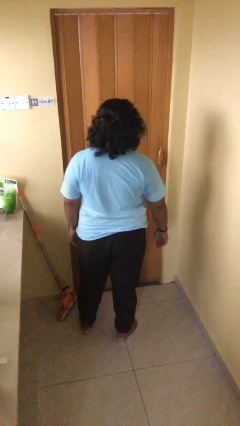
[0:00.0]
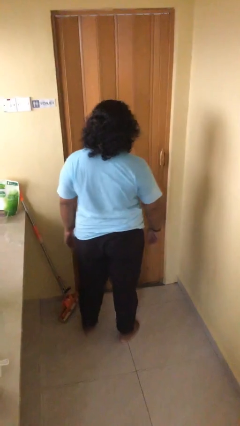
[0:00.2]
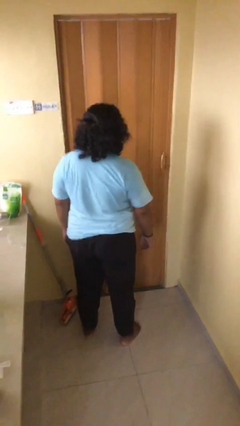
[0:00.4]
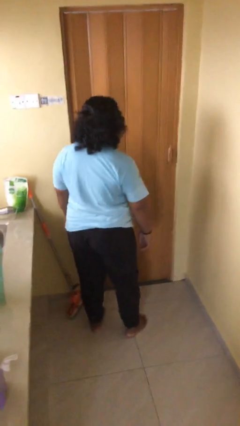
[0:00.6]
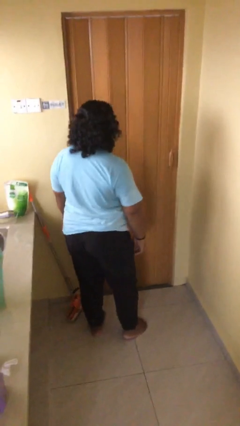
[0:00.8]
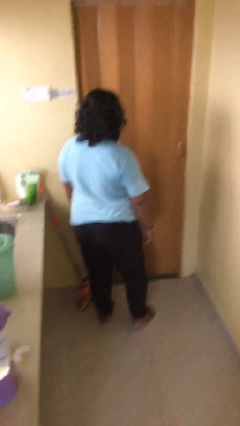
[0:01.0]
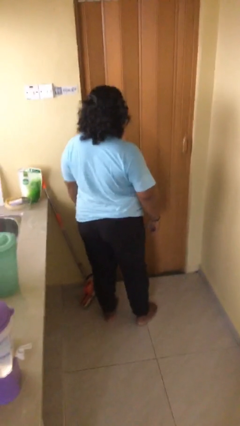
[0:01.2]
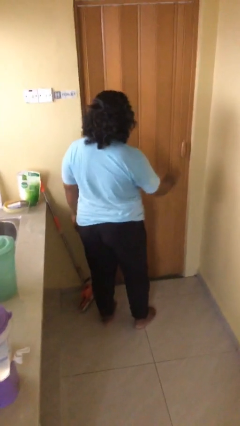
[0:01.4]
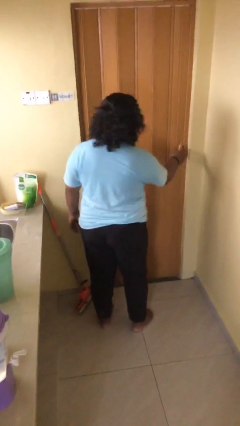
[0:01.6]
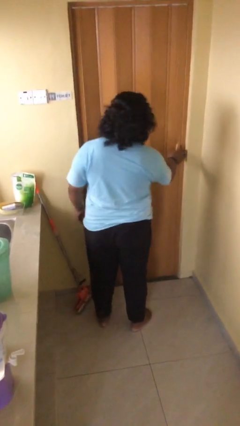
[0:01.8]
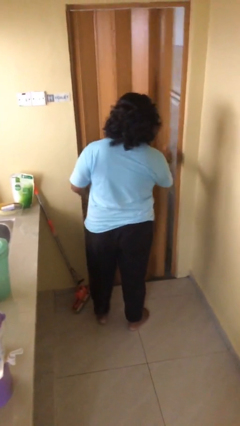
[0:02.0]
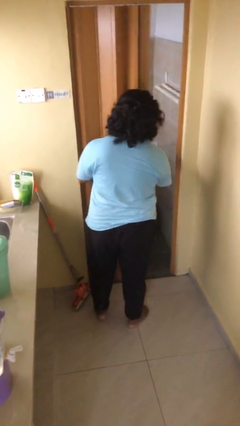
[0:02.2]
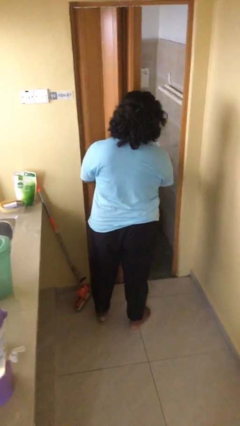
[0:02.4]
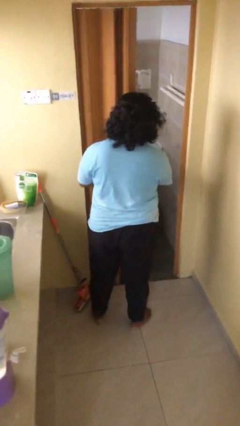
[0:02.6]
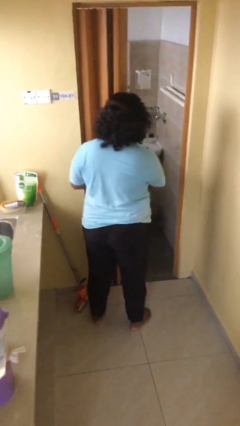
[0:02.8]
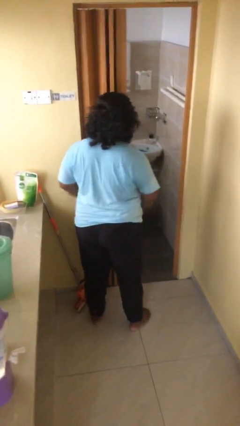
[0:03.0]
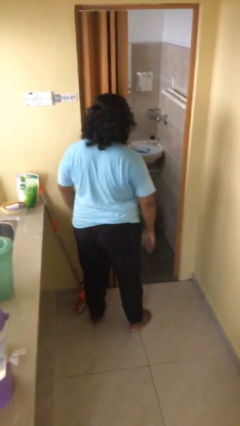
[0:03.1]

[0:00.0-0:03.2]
person opens sliding door

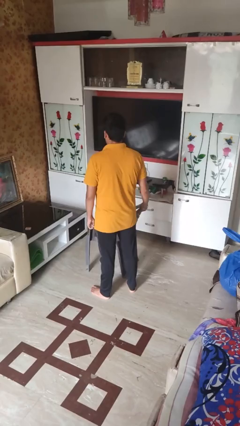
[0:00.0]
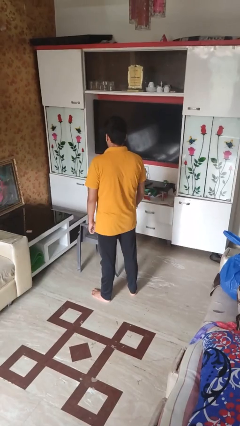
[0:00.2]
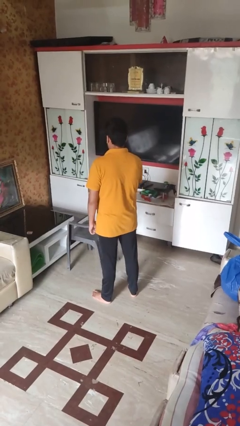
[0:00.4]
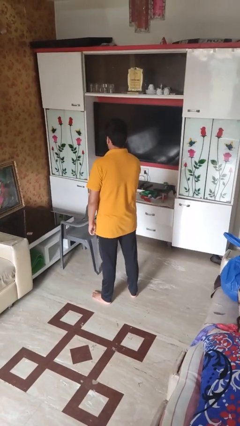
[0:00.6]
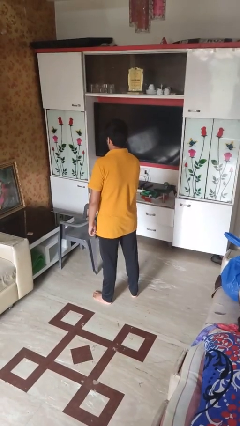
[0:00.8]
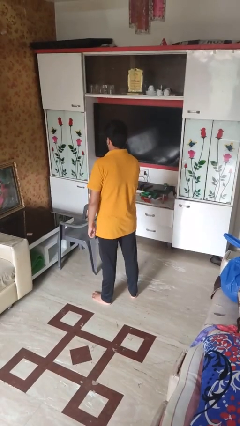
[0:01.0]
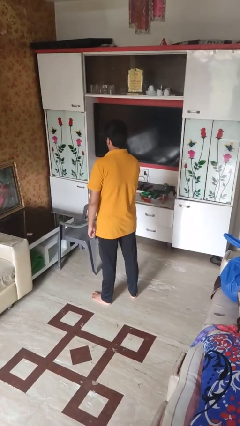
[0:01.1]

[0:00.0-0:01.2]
person pushes in chair

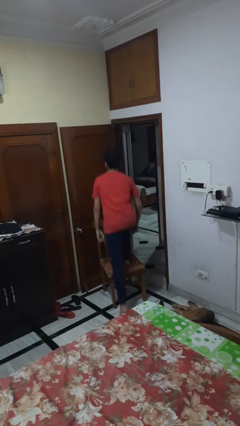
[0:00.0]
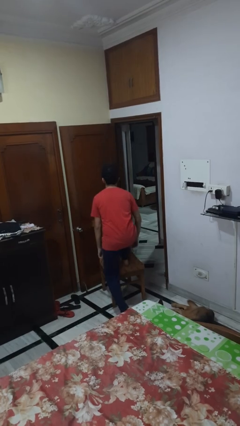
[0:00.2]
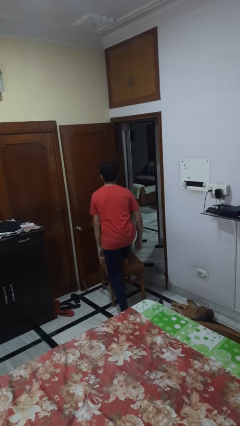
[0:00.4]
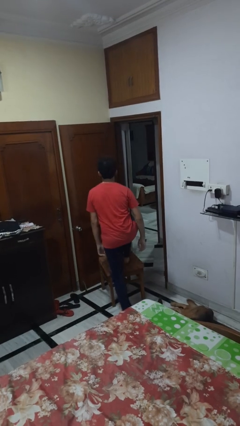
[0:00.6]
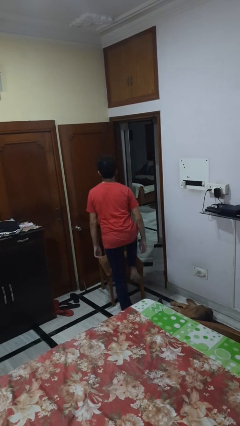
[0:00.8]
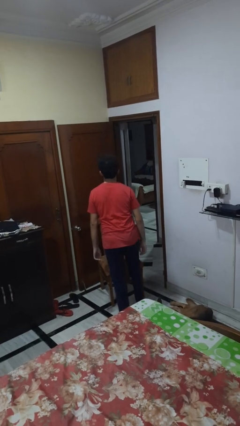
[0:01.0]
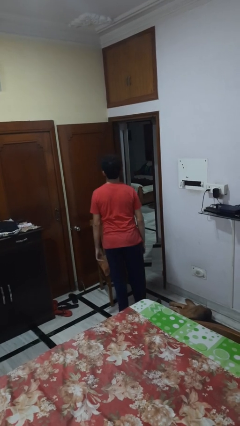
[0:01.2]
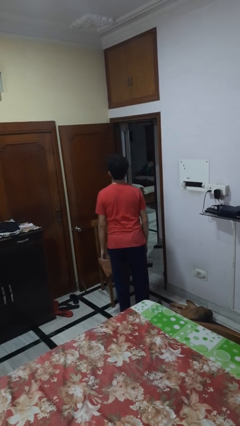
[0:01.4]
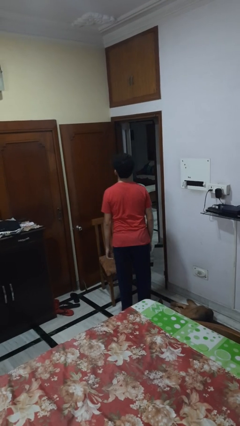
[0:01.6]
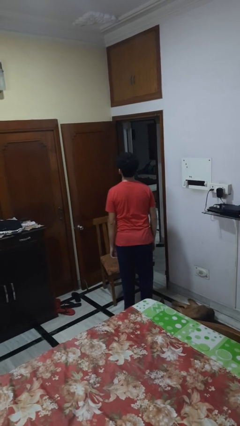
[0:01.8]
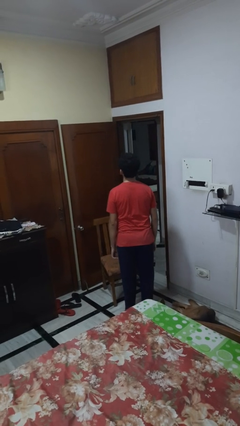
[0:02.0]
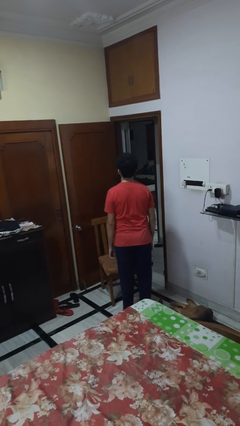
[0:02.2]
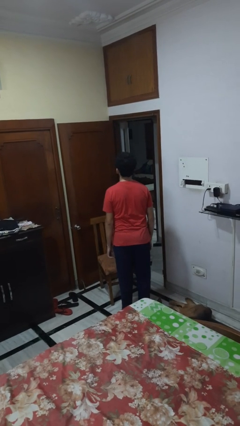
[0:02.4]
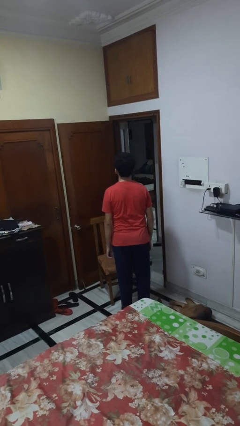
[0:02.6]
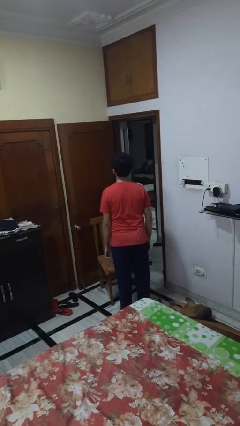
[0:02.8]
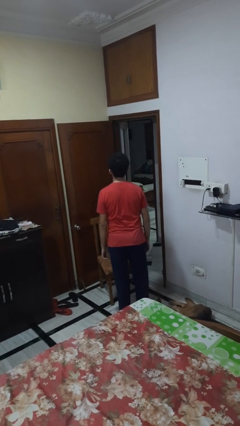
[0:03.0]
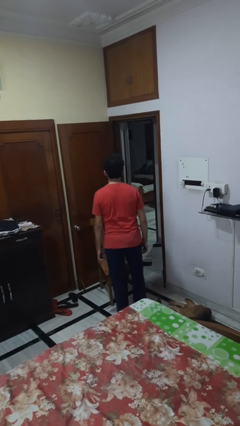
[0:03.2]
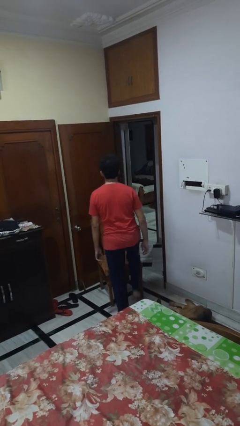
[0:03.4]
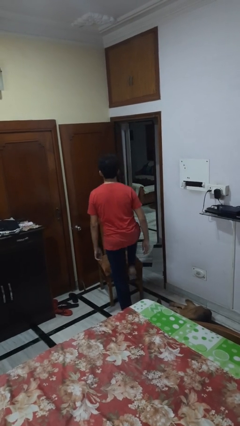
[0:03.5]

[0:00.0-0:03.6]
person climbs off chair

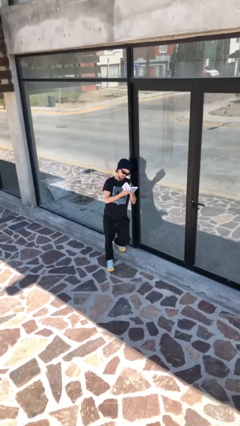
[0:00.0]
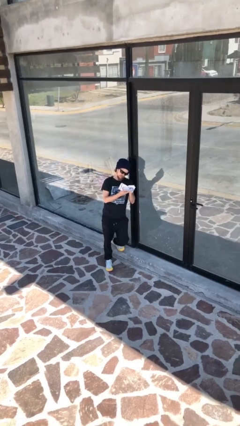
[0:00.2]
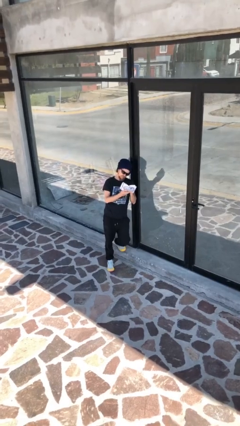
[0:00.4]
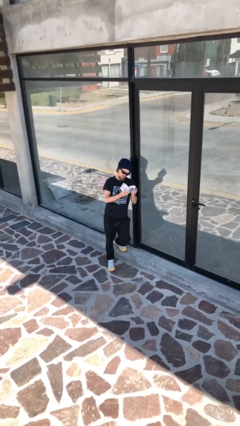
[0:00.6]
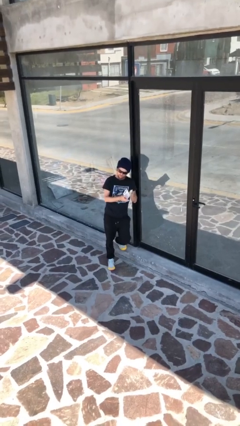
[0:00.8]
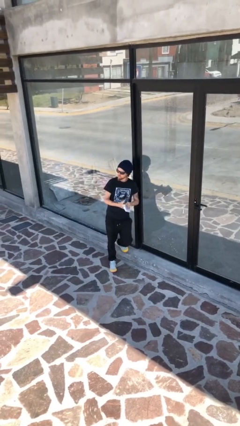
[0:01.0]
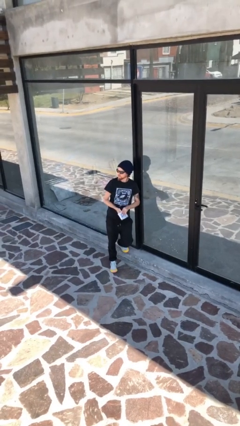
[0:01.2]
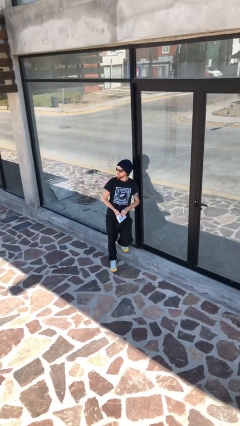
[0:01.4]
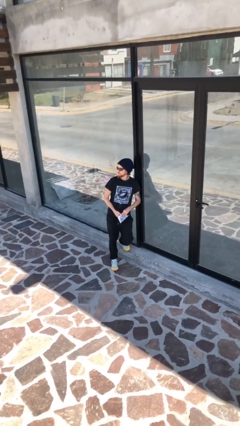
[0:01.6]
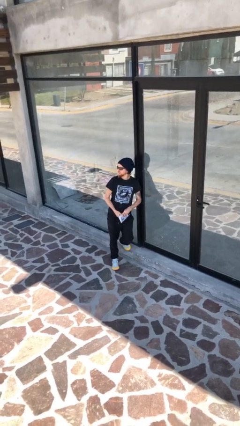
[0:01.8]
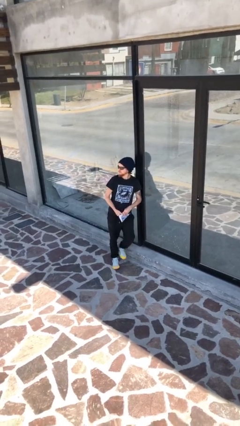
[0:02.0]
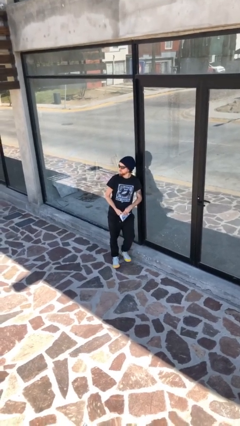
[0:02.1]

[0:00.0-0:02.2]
person reads document

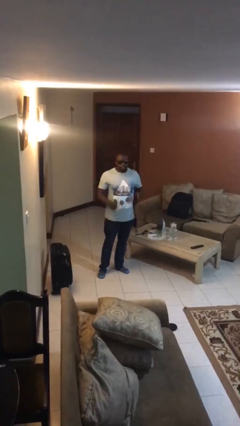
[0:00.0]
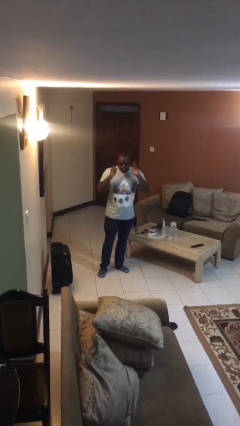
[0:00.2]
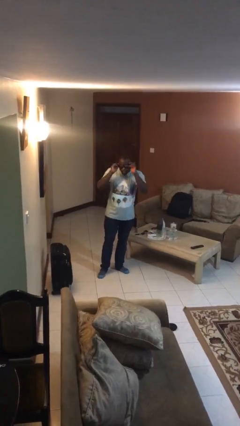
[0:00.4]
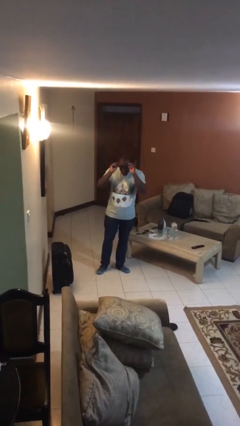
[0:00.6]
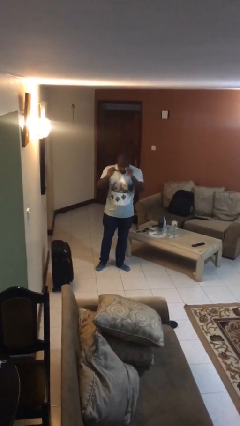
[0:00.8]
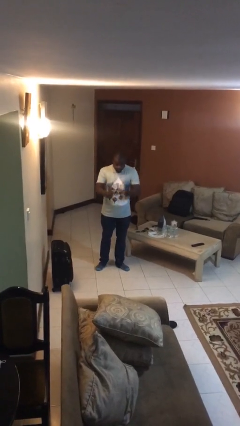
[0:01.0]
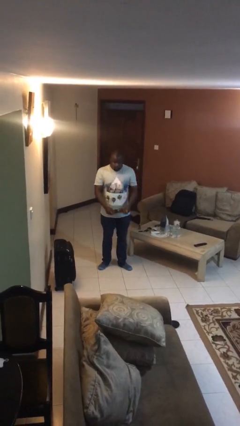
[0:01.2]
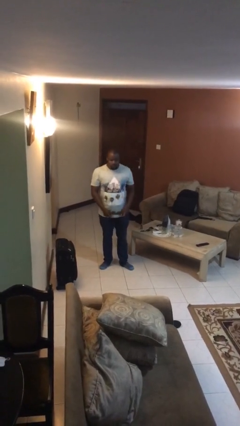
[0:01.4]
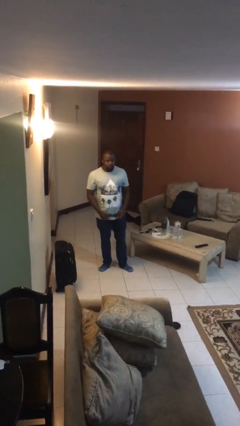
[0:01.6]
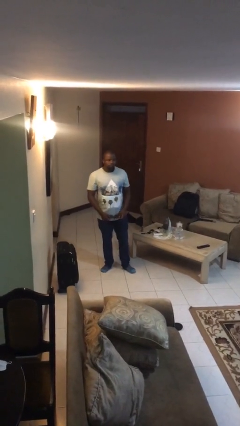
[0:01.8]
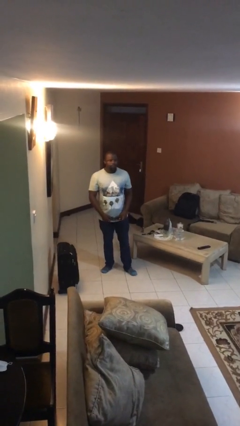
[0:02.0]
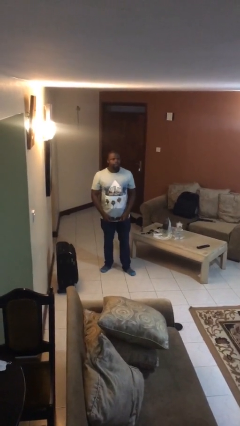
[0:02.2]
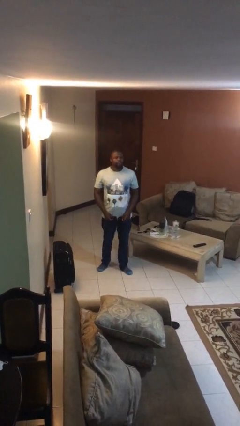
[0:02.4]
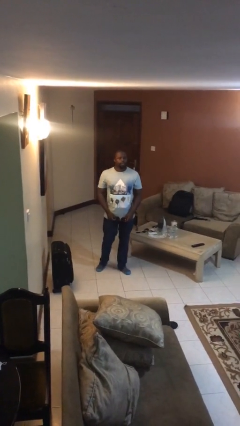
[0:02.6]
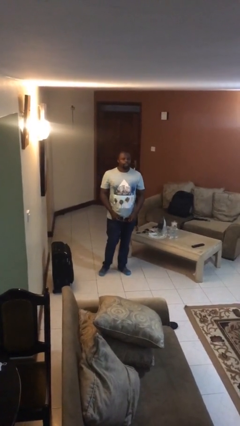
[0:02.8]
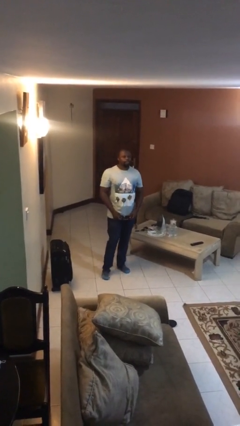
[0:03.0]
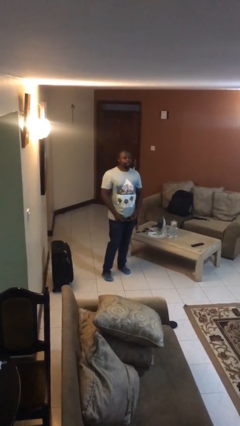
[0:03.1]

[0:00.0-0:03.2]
person takes off sunglasses

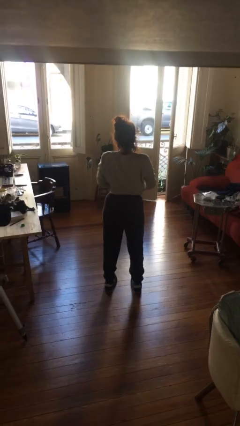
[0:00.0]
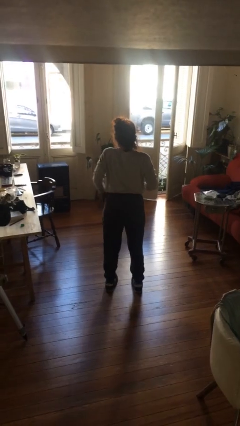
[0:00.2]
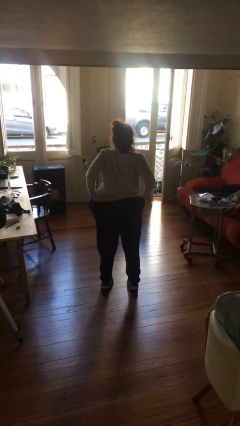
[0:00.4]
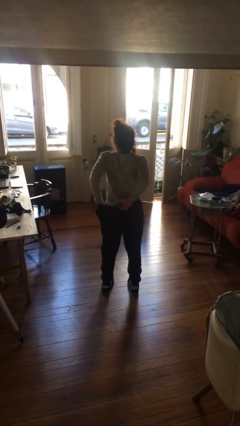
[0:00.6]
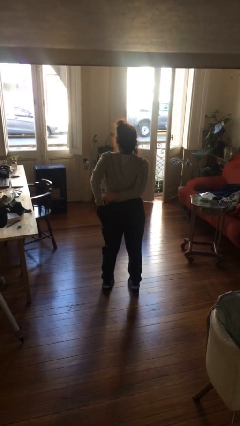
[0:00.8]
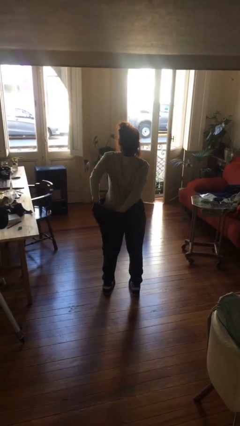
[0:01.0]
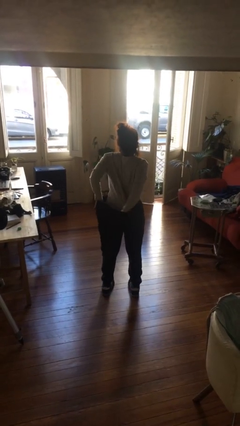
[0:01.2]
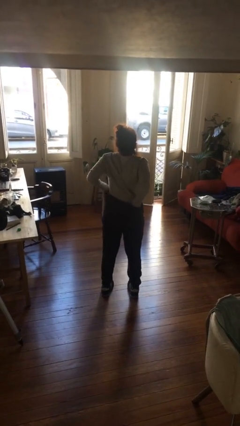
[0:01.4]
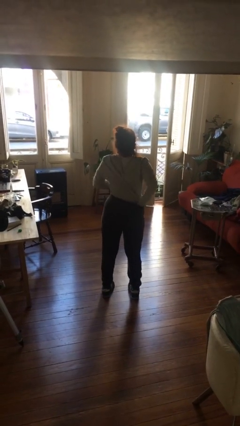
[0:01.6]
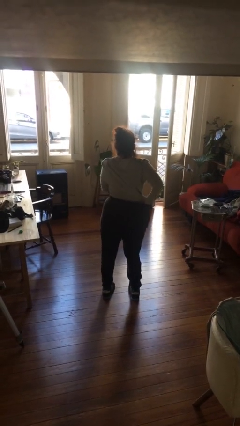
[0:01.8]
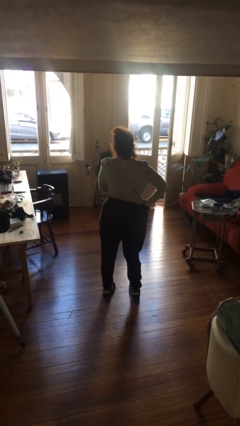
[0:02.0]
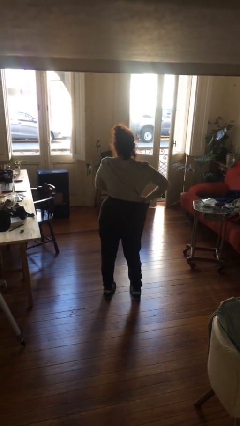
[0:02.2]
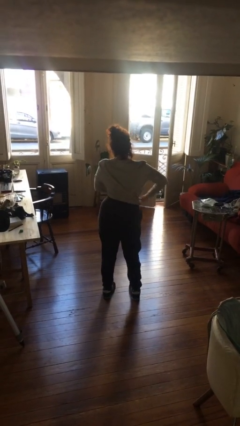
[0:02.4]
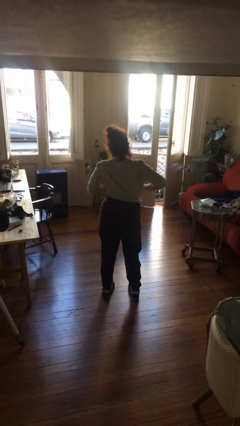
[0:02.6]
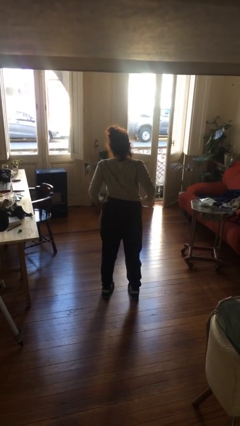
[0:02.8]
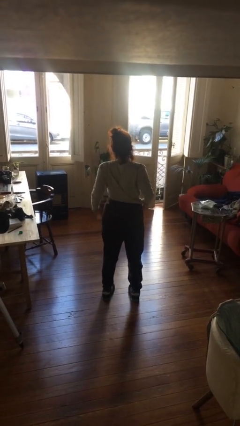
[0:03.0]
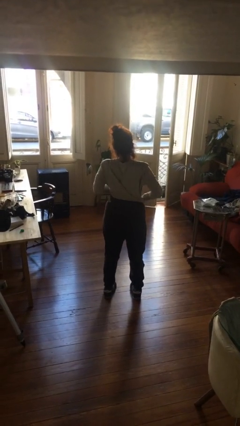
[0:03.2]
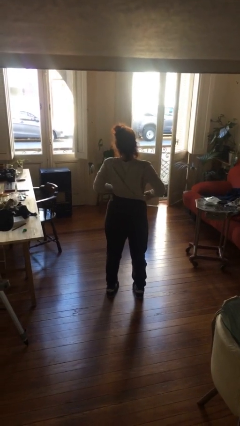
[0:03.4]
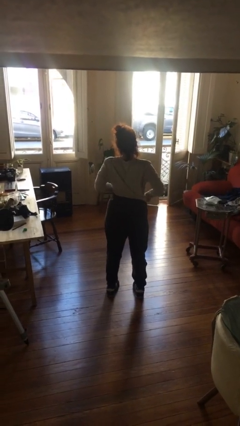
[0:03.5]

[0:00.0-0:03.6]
person tucks in shirt

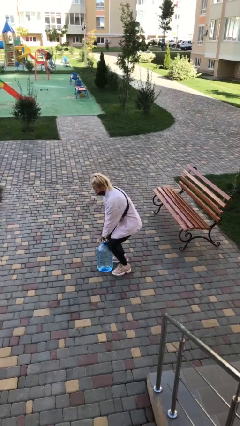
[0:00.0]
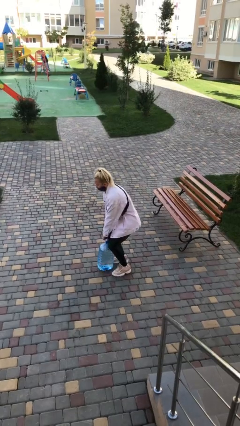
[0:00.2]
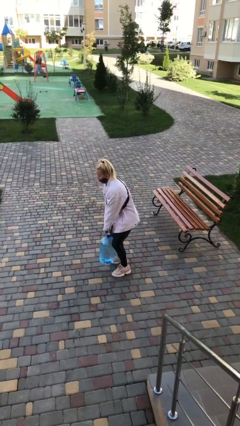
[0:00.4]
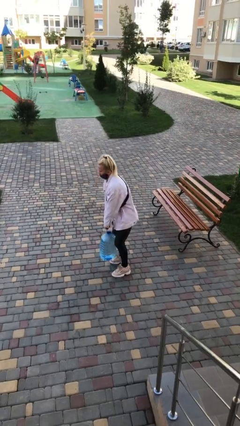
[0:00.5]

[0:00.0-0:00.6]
person picks up object from floor
